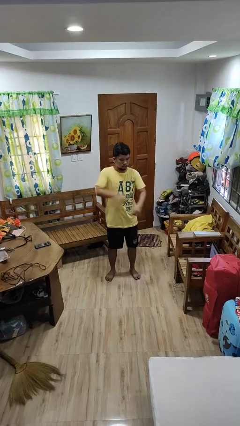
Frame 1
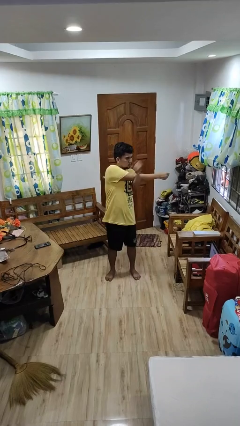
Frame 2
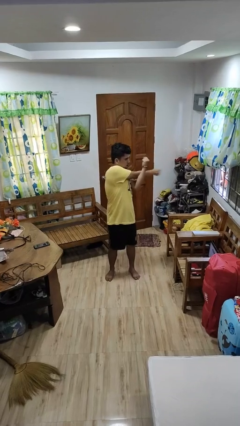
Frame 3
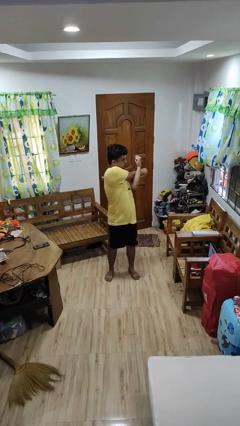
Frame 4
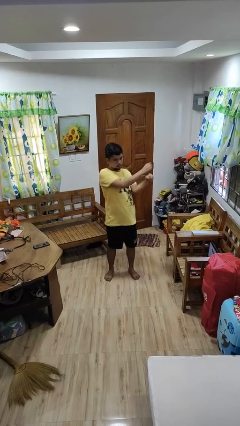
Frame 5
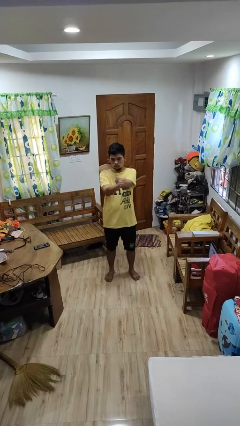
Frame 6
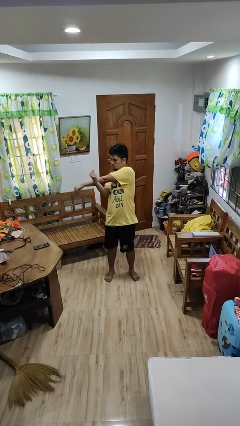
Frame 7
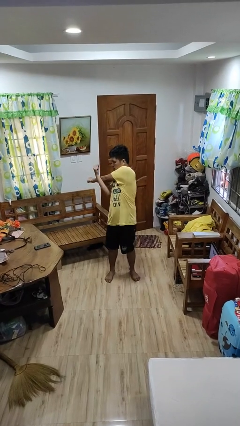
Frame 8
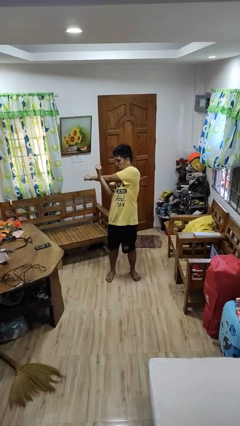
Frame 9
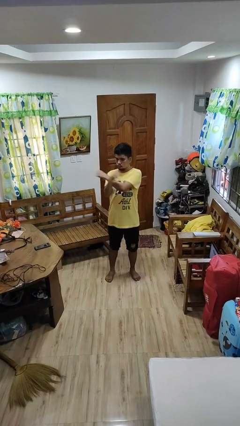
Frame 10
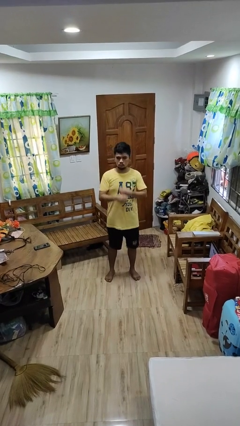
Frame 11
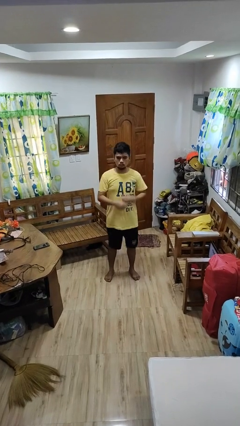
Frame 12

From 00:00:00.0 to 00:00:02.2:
person stretches arms to side

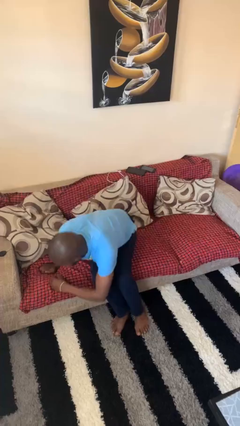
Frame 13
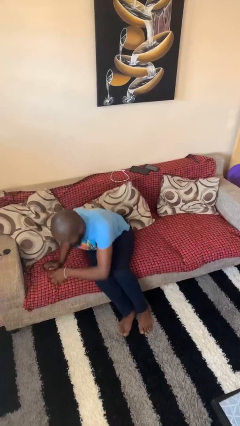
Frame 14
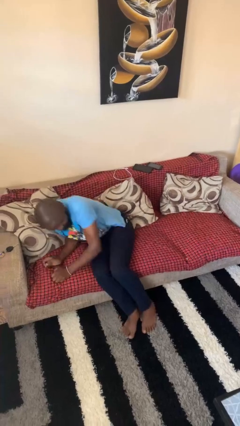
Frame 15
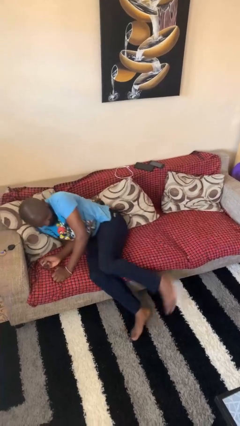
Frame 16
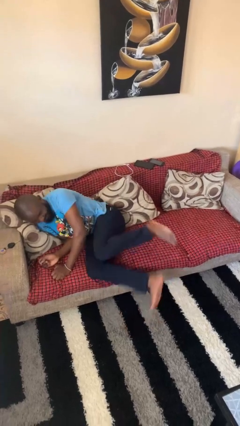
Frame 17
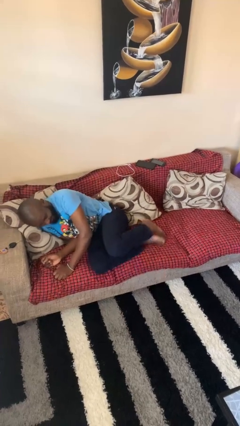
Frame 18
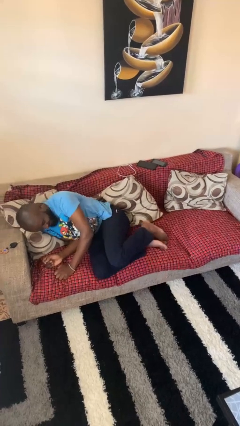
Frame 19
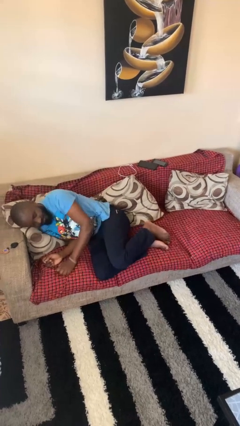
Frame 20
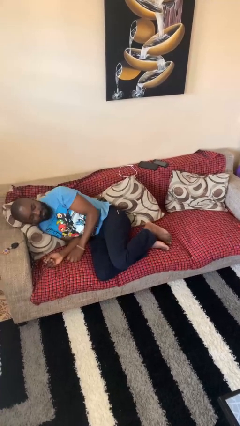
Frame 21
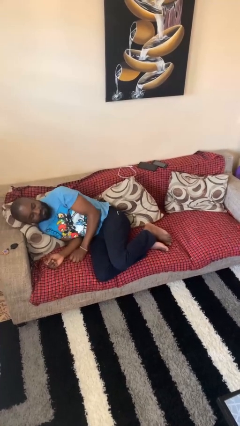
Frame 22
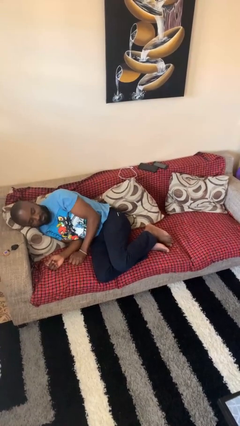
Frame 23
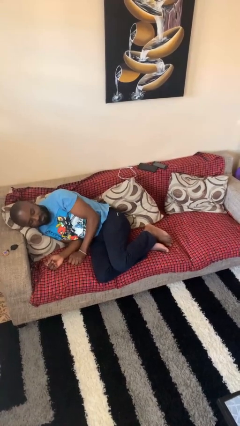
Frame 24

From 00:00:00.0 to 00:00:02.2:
person lies down on couch

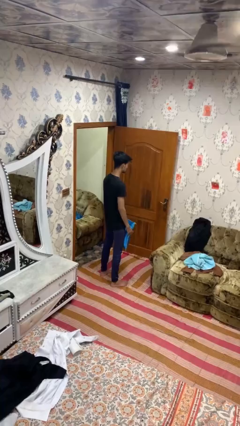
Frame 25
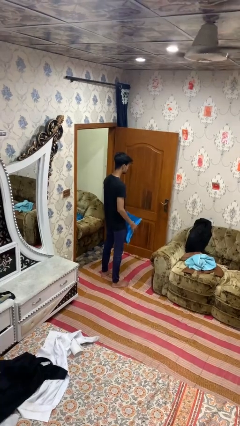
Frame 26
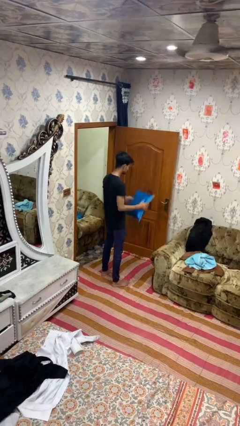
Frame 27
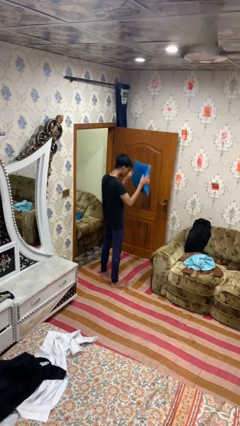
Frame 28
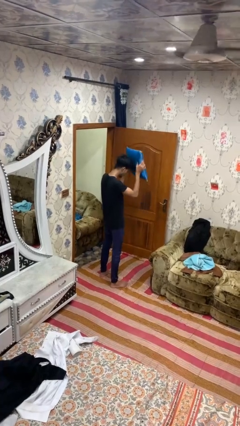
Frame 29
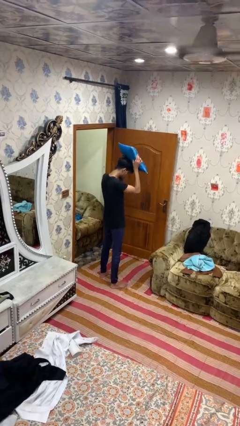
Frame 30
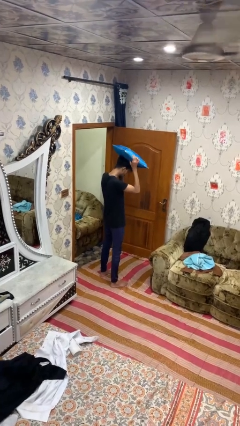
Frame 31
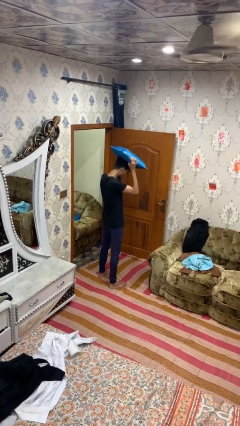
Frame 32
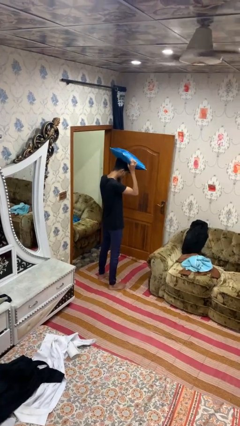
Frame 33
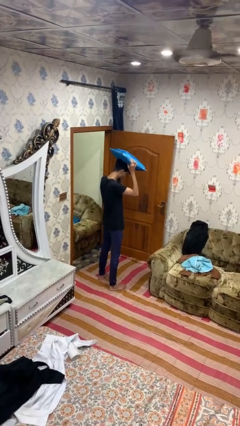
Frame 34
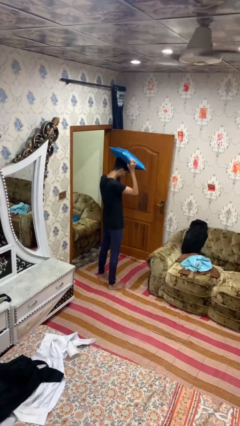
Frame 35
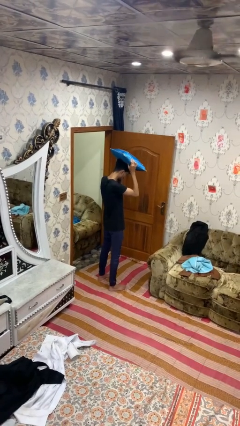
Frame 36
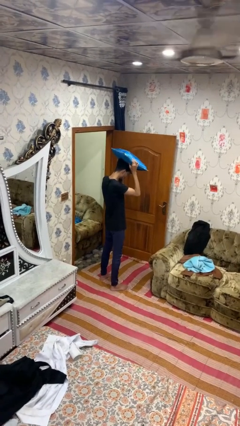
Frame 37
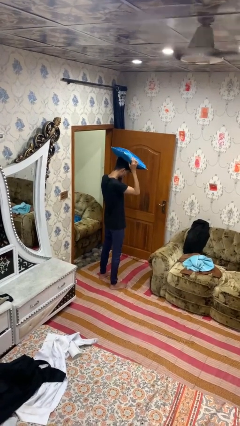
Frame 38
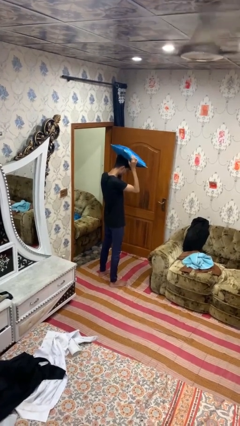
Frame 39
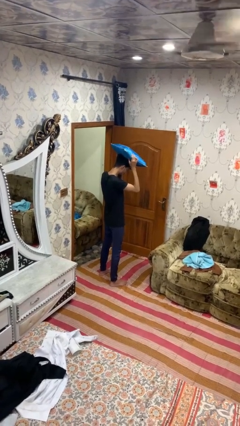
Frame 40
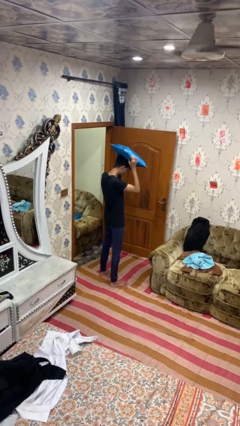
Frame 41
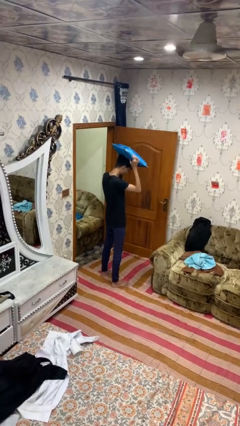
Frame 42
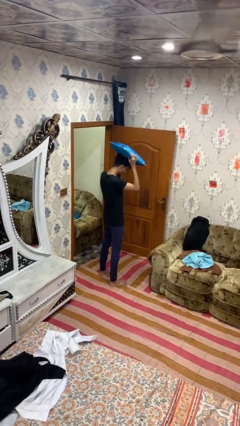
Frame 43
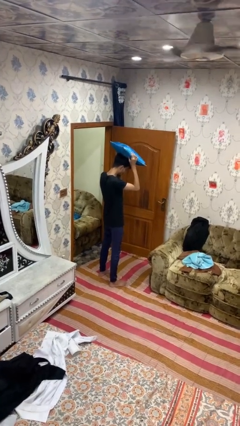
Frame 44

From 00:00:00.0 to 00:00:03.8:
person holds object above head

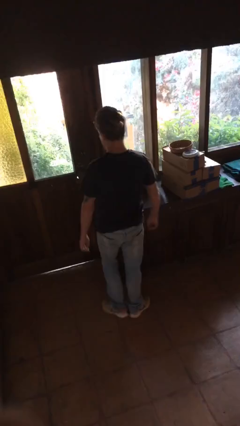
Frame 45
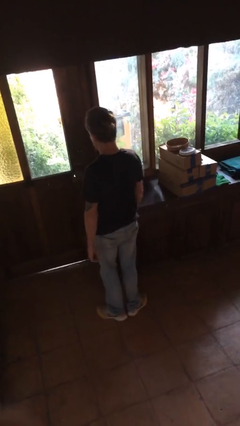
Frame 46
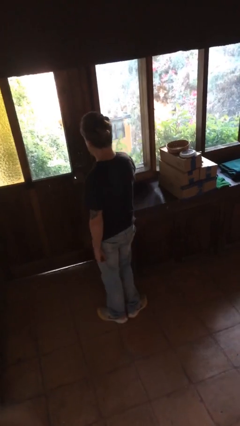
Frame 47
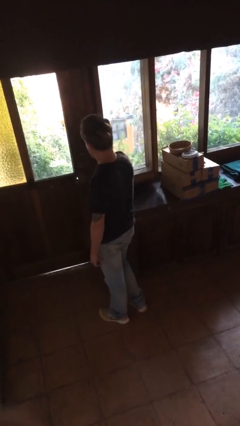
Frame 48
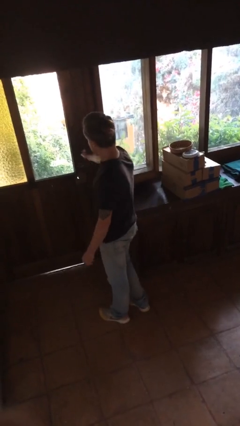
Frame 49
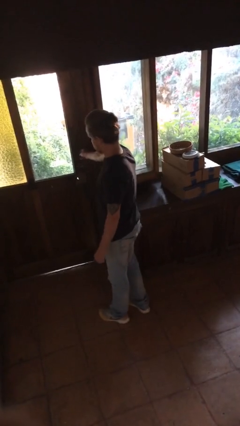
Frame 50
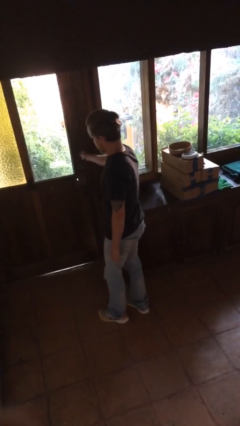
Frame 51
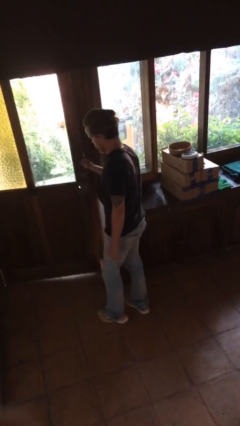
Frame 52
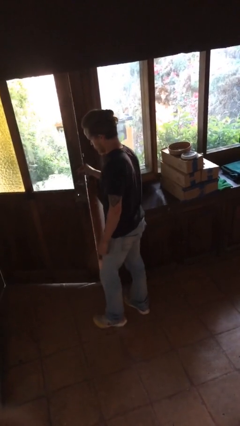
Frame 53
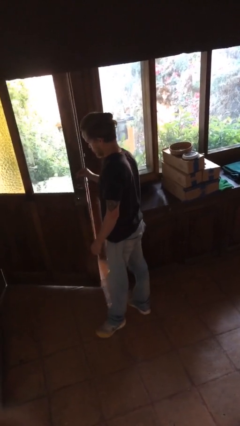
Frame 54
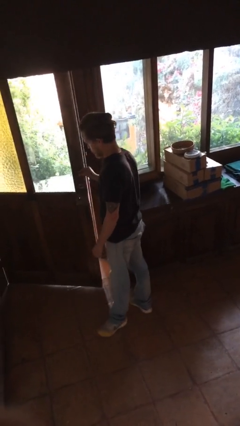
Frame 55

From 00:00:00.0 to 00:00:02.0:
person opens facility door

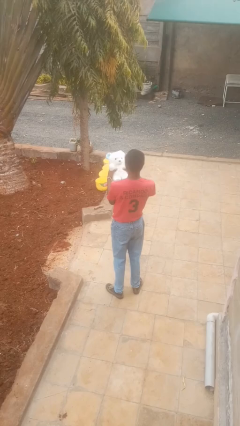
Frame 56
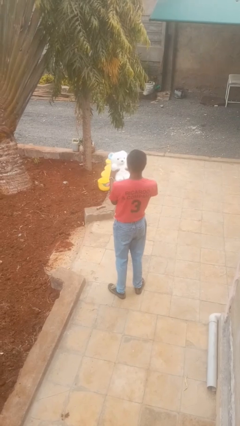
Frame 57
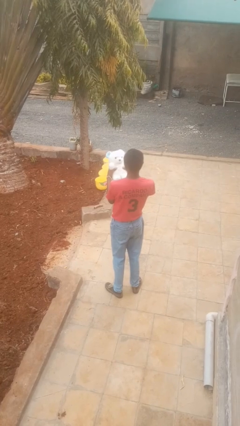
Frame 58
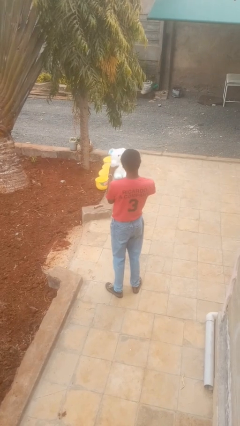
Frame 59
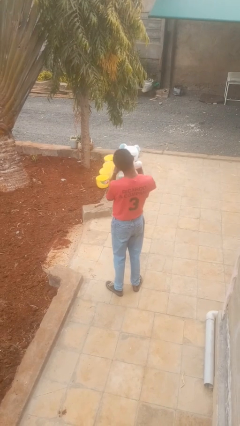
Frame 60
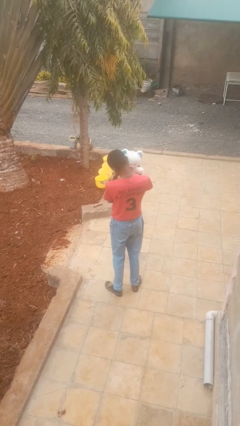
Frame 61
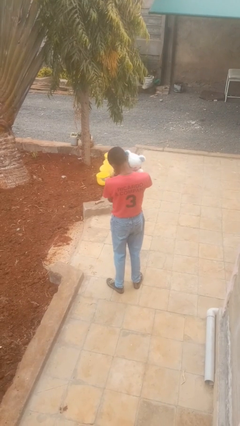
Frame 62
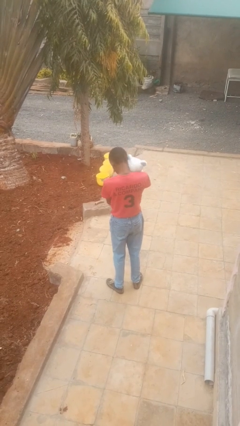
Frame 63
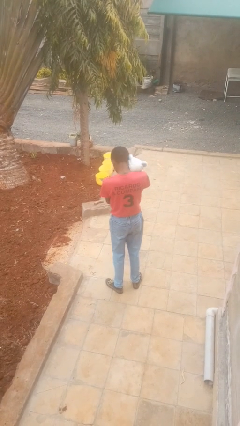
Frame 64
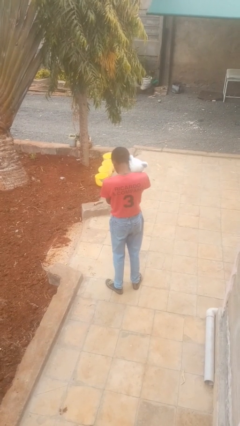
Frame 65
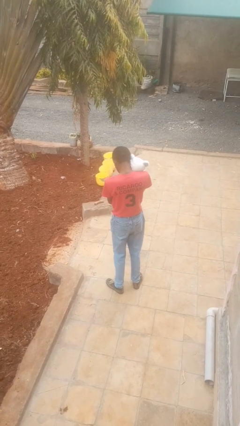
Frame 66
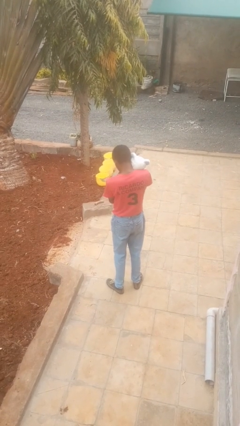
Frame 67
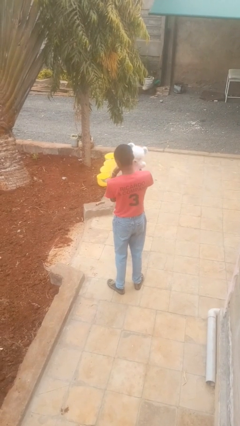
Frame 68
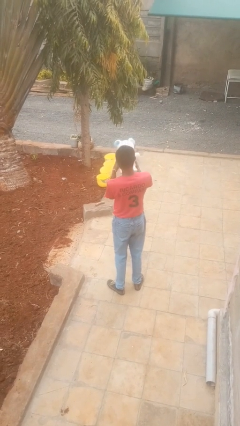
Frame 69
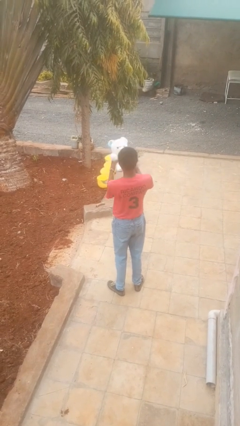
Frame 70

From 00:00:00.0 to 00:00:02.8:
person hugs stuffed animal

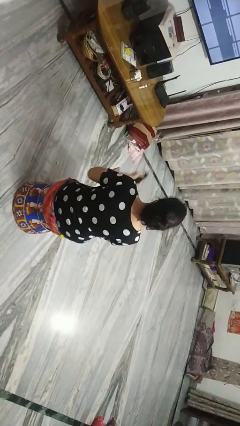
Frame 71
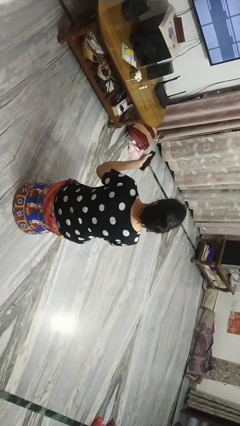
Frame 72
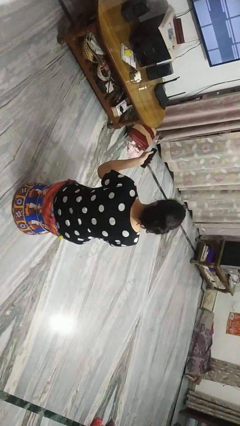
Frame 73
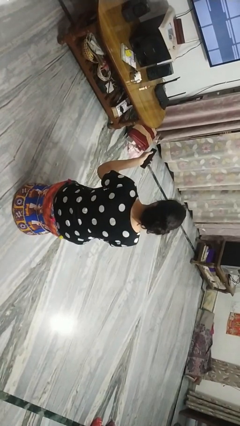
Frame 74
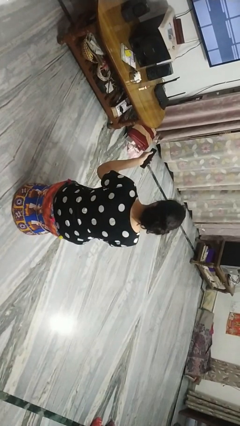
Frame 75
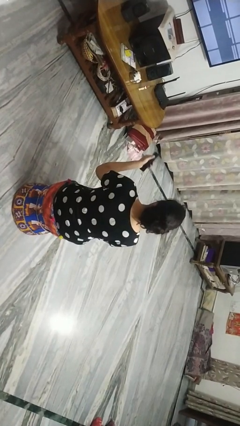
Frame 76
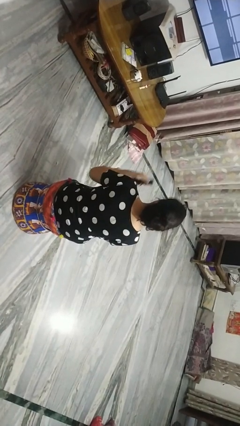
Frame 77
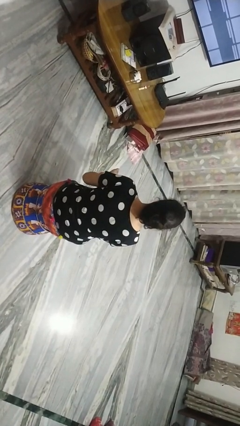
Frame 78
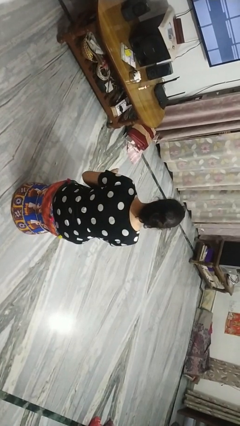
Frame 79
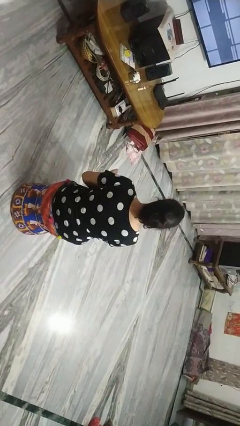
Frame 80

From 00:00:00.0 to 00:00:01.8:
person uses television remote

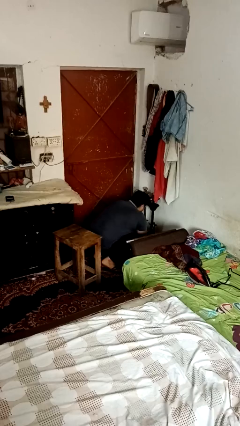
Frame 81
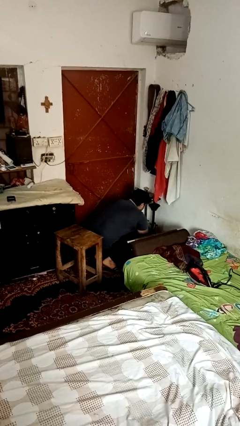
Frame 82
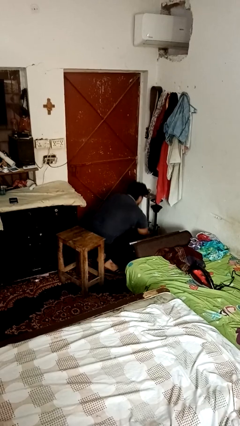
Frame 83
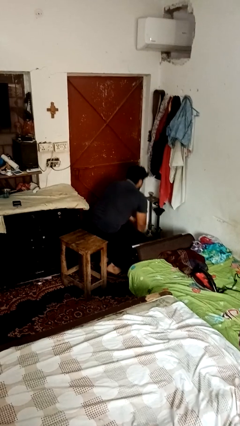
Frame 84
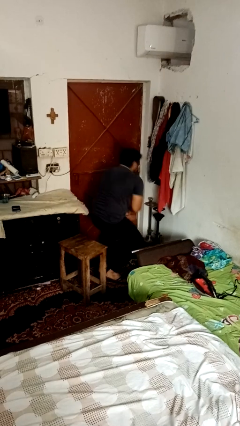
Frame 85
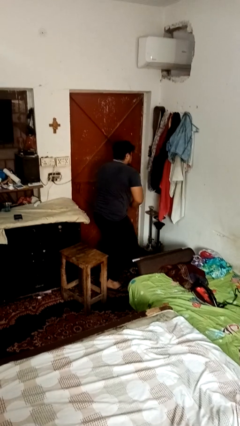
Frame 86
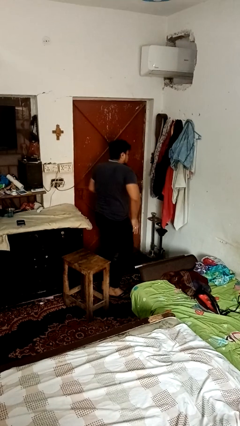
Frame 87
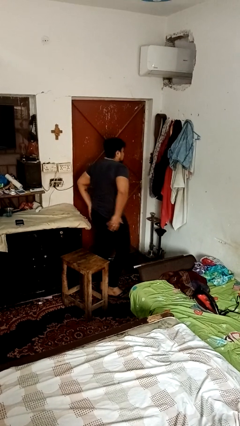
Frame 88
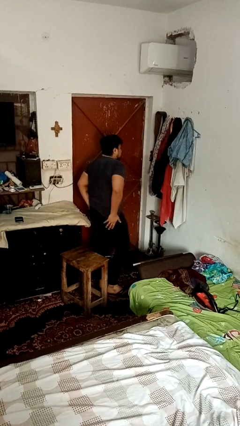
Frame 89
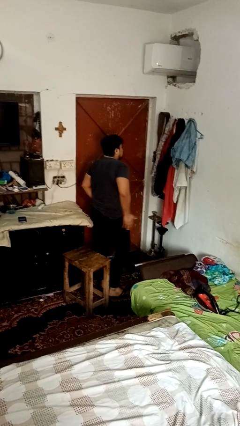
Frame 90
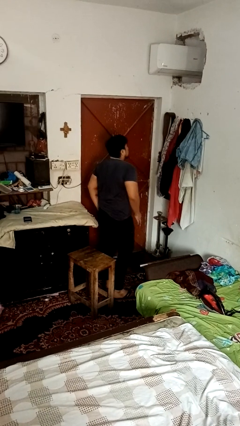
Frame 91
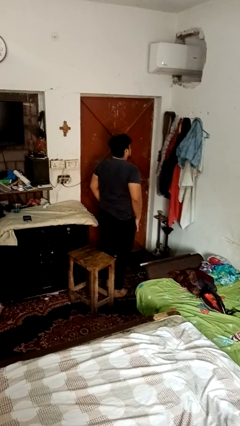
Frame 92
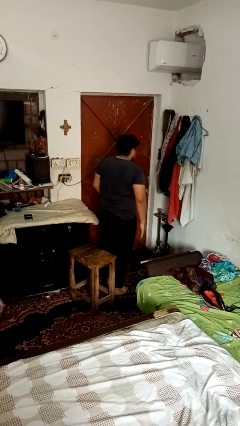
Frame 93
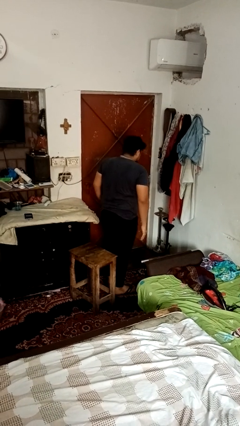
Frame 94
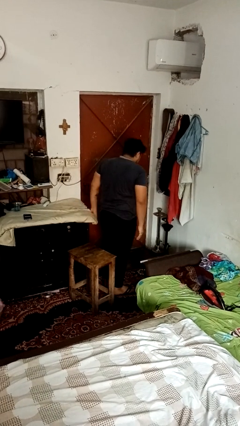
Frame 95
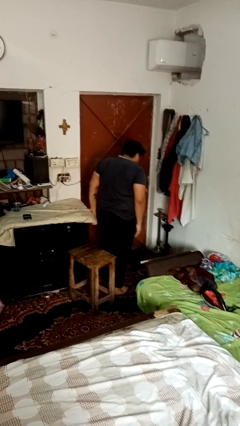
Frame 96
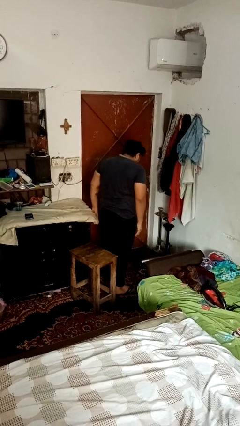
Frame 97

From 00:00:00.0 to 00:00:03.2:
person stands up from floor
